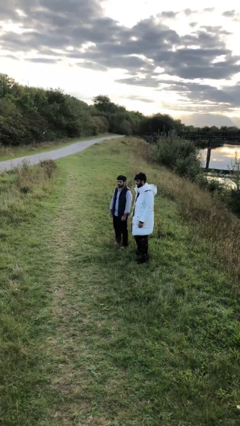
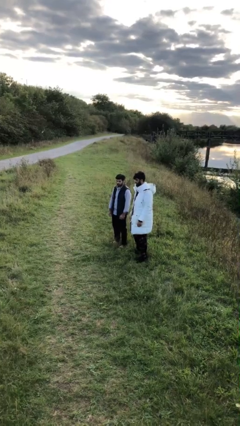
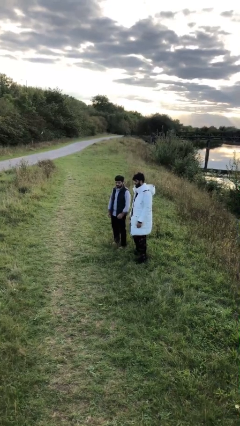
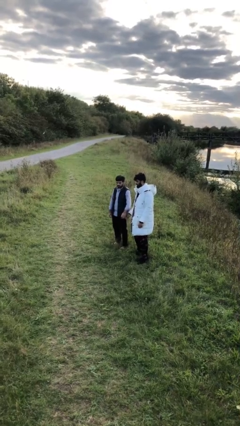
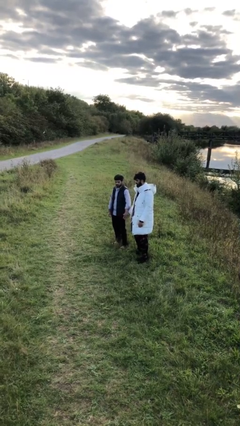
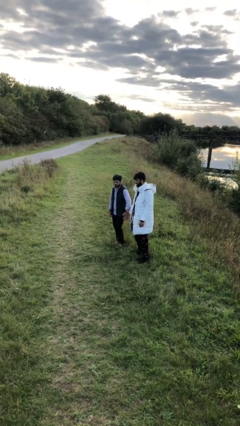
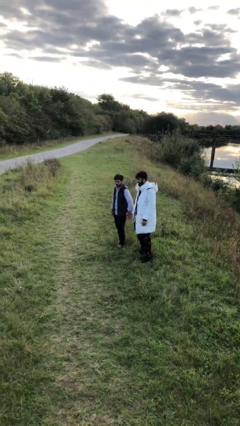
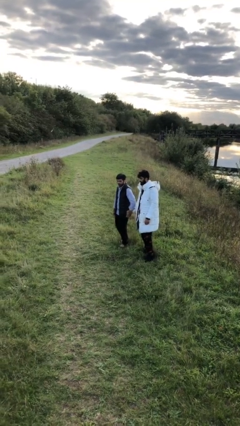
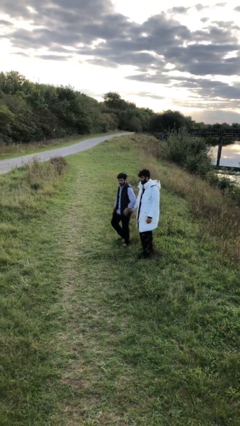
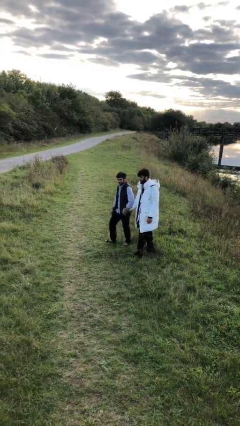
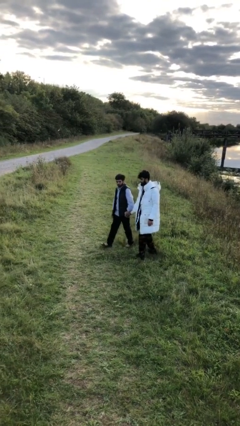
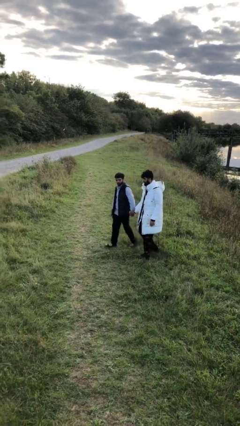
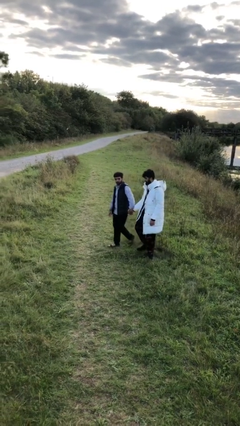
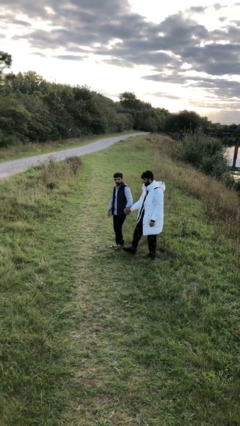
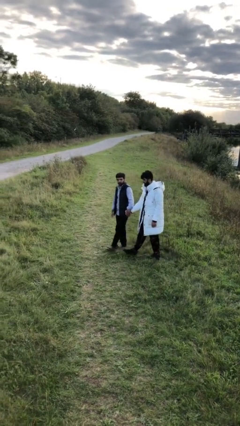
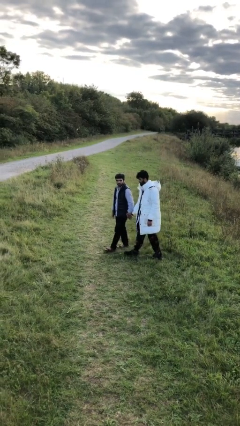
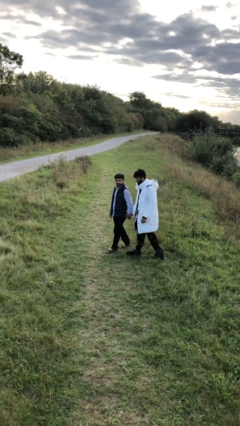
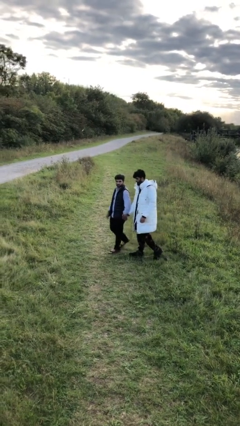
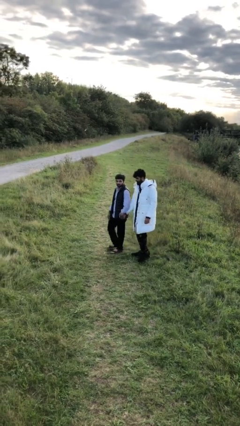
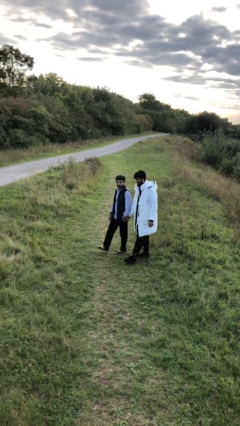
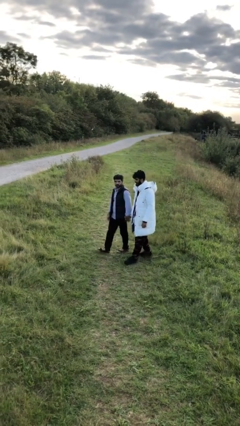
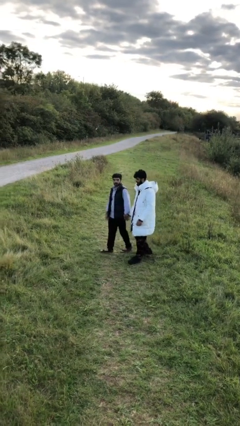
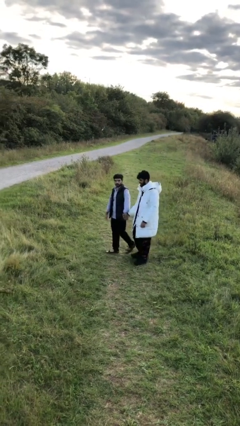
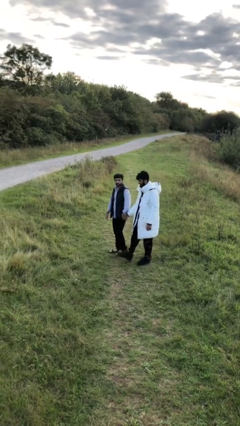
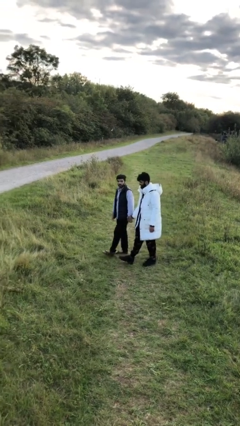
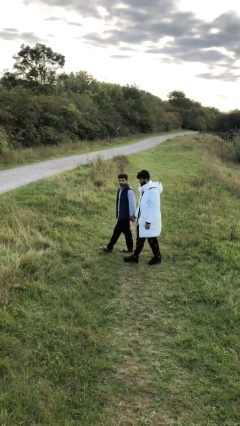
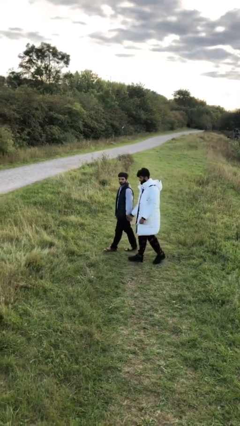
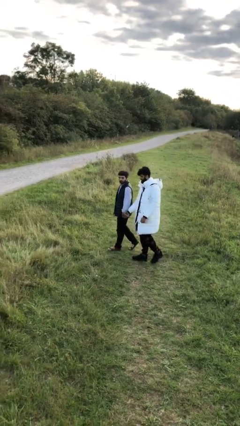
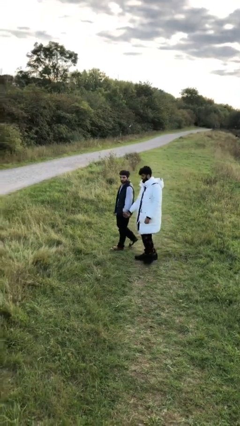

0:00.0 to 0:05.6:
person holds hand

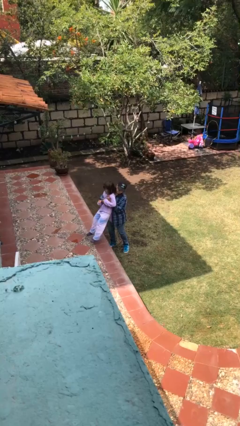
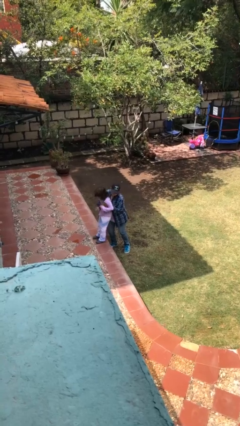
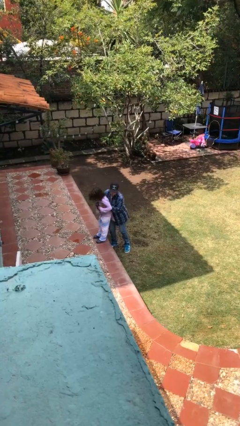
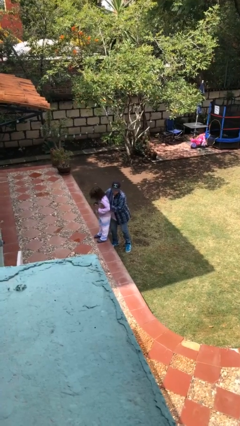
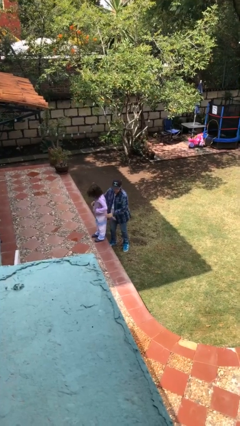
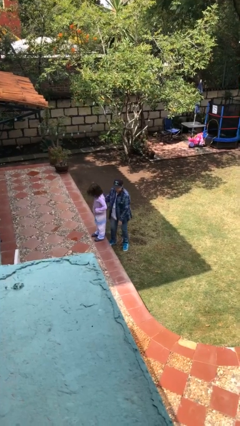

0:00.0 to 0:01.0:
person puts down person

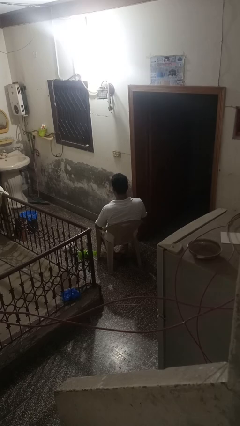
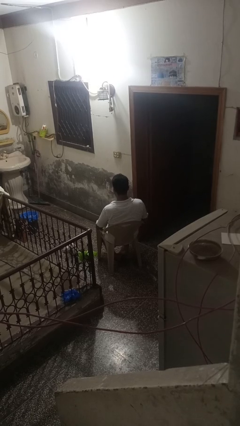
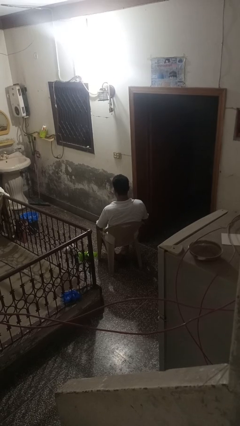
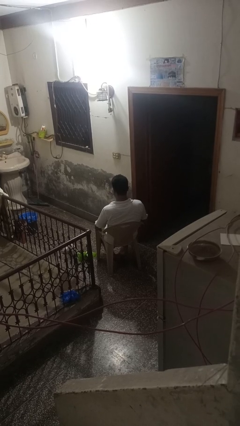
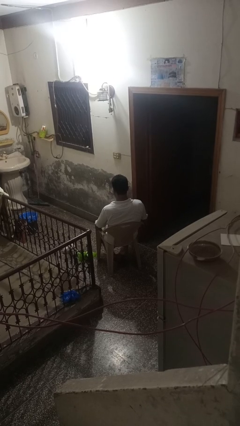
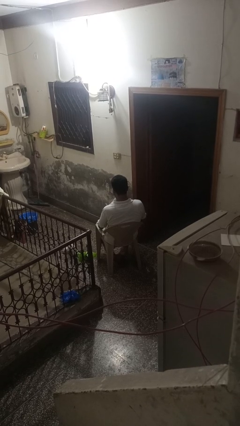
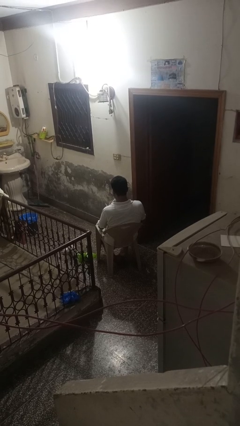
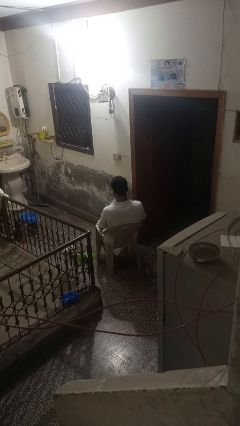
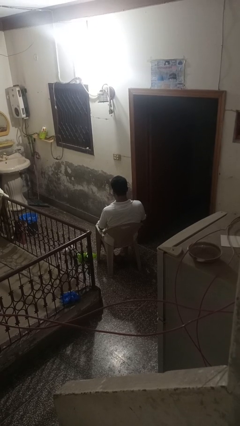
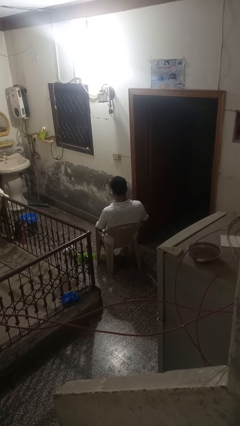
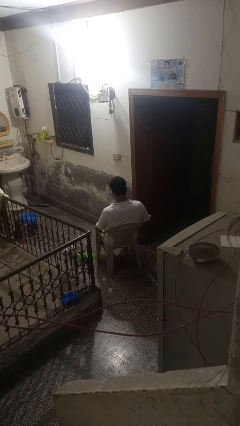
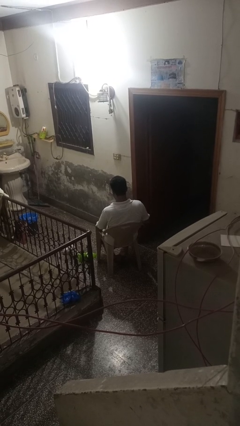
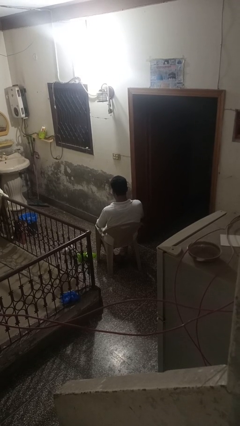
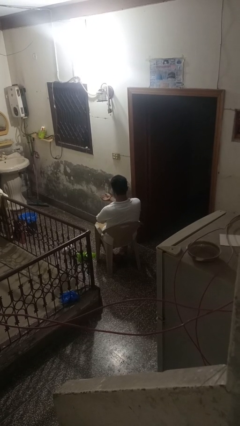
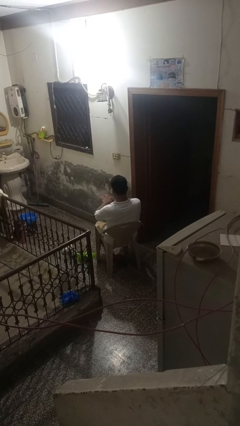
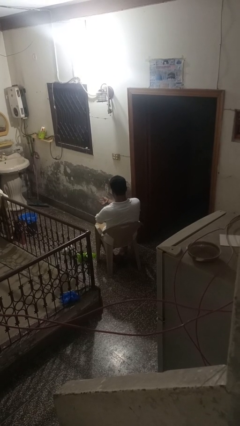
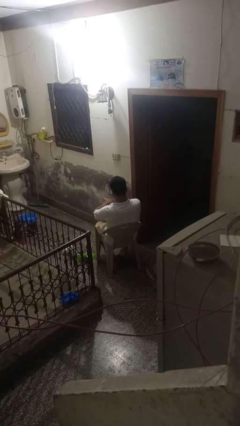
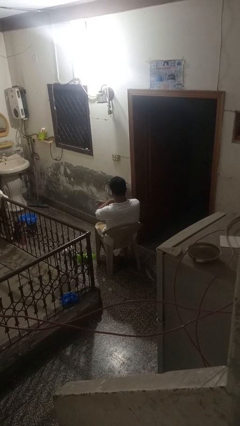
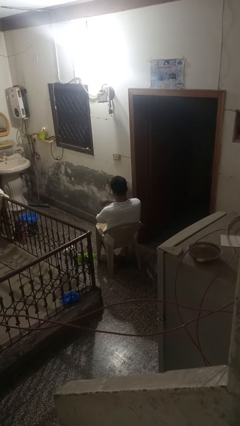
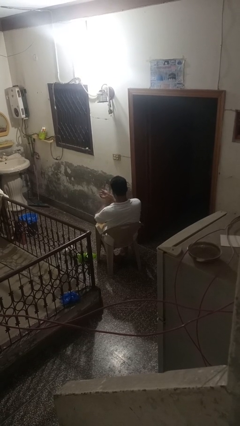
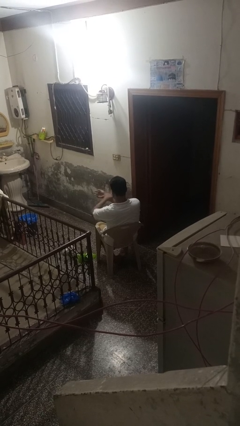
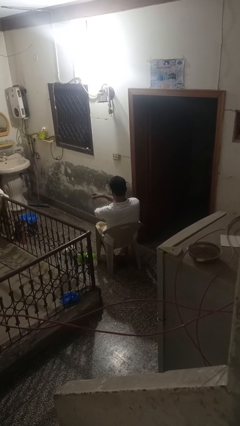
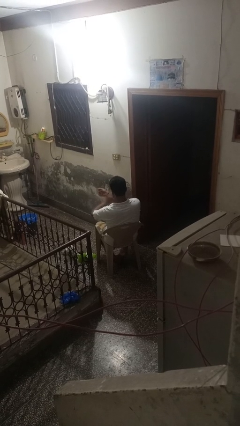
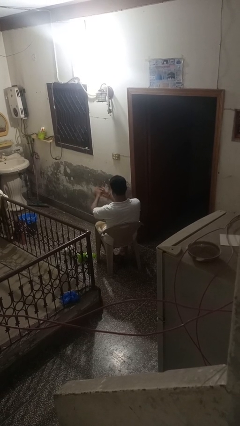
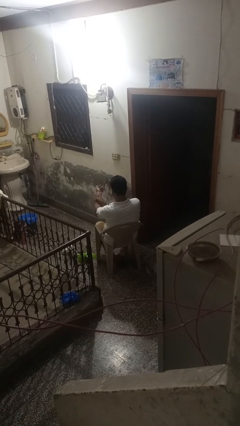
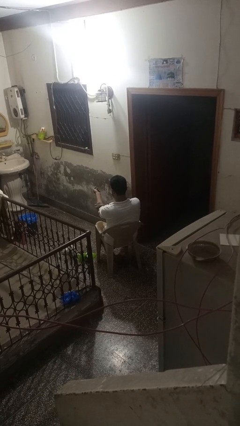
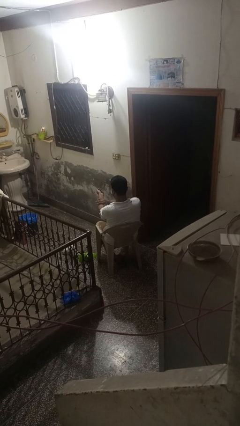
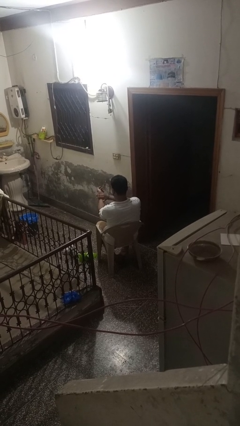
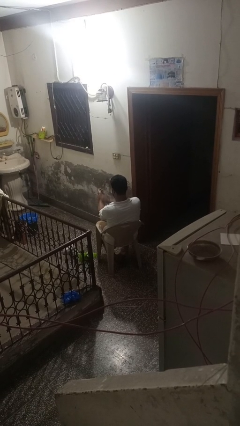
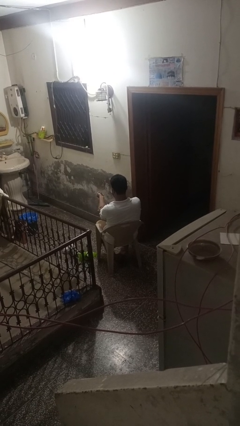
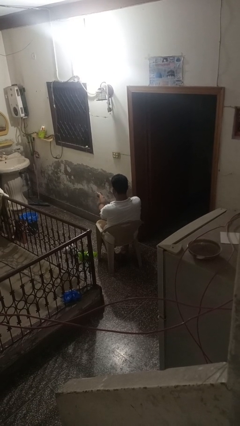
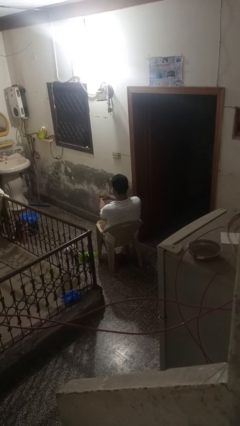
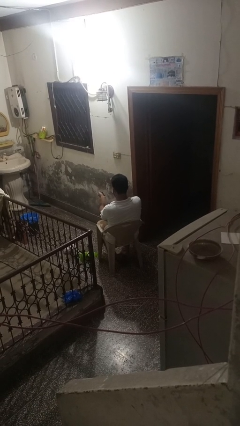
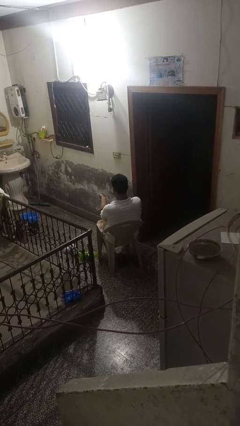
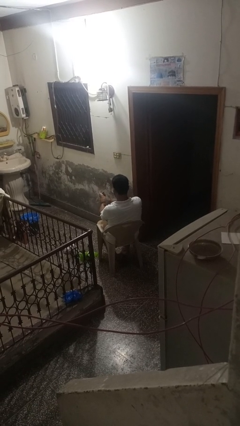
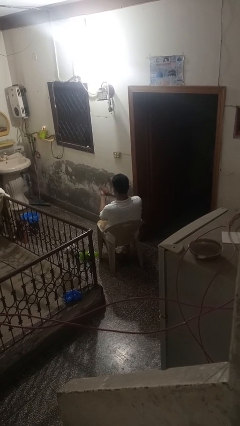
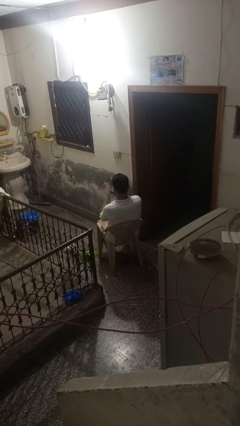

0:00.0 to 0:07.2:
person applies sunscreen

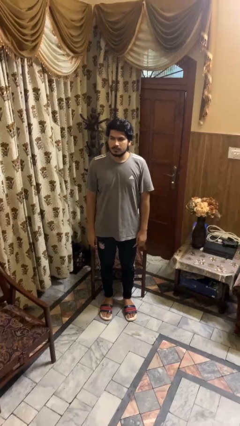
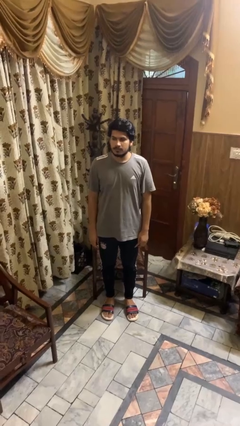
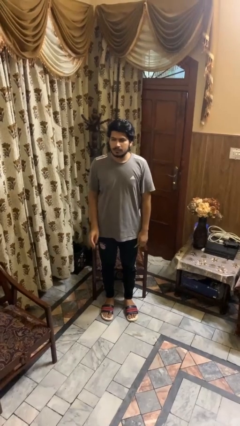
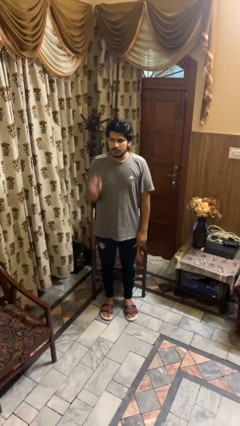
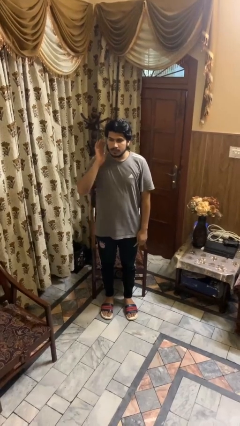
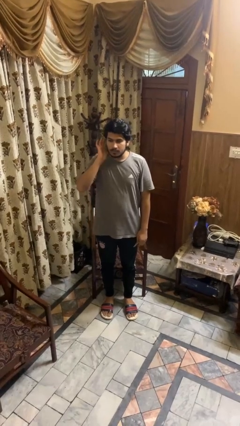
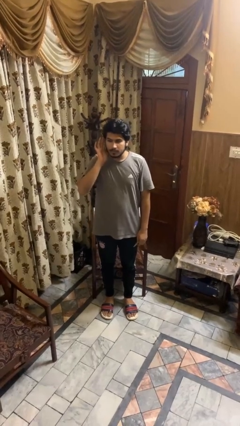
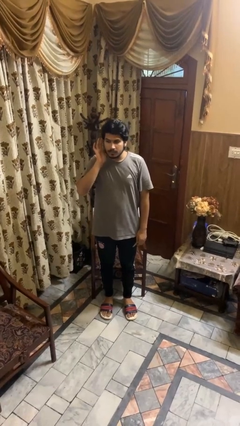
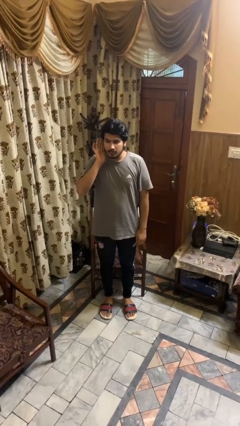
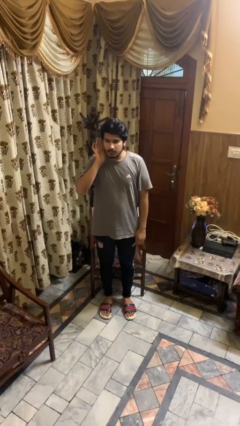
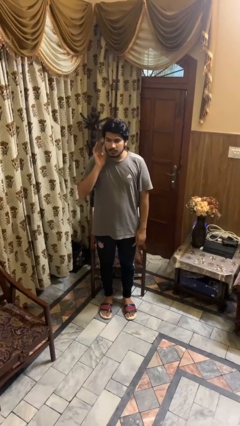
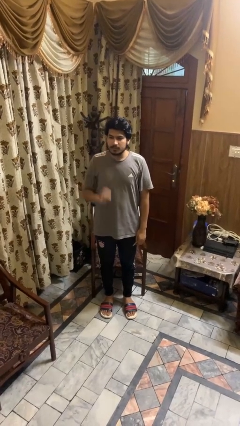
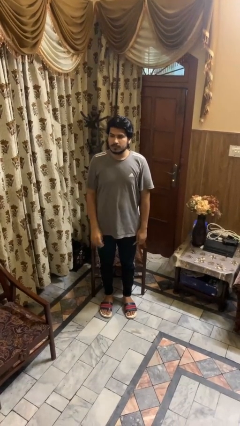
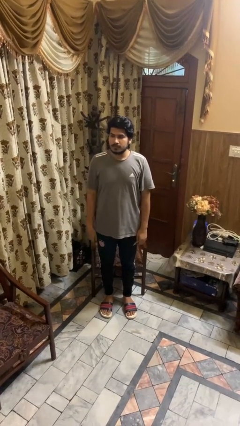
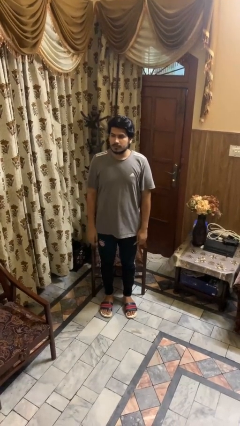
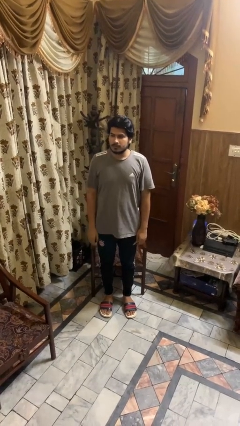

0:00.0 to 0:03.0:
person gestures listen closely

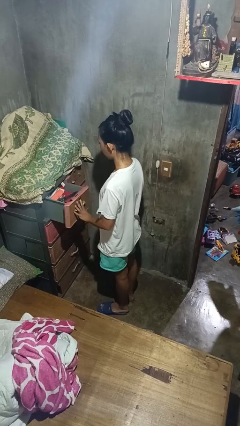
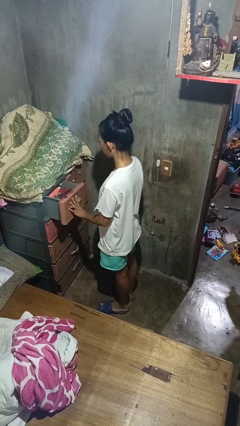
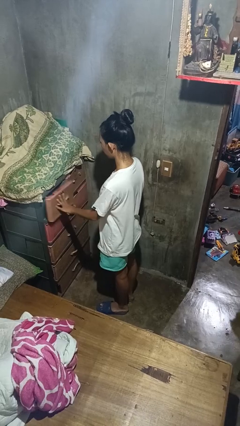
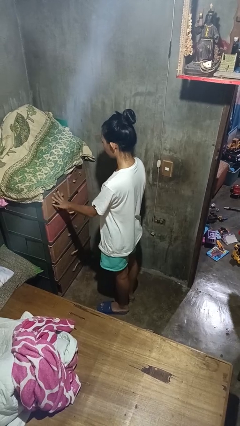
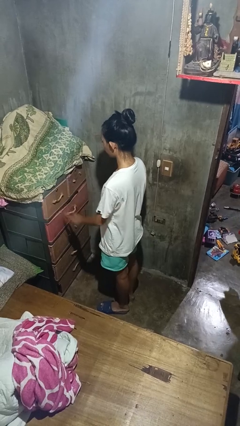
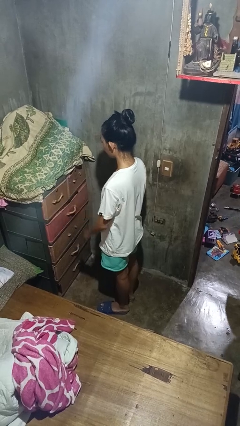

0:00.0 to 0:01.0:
person closes dresser drawer
